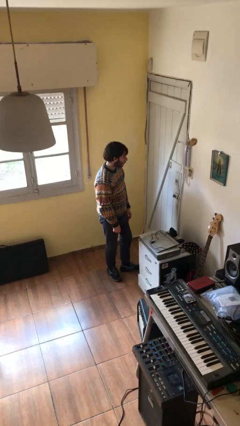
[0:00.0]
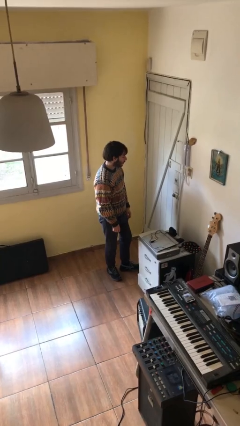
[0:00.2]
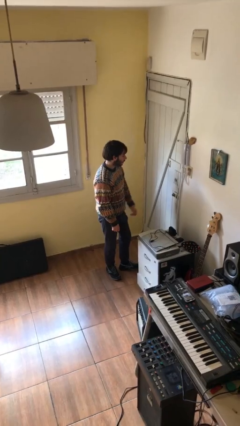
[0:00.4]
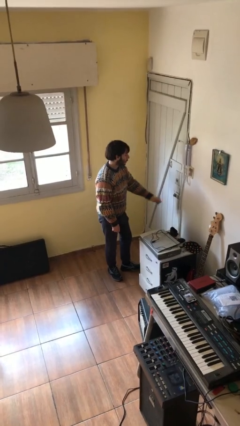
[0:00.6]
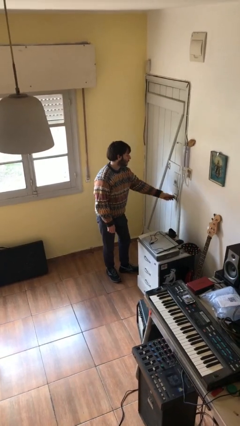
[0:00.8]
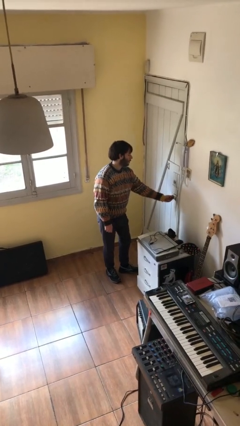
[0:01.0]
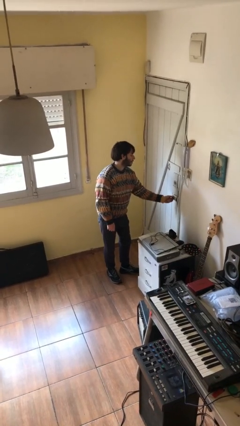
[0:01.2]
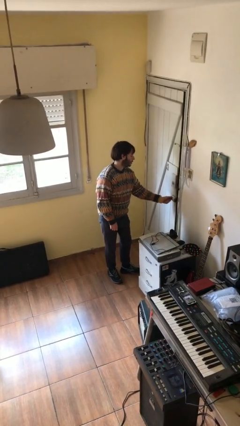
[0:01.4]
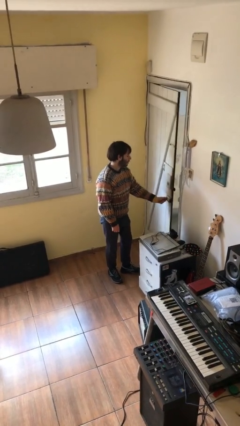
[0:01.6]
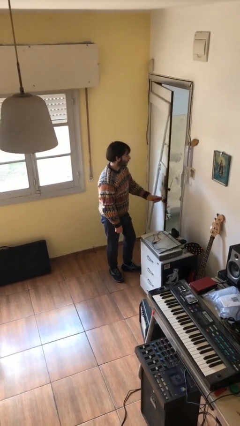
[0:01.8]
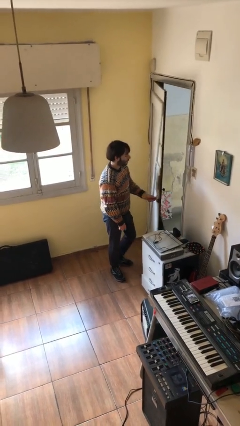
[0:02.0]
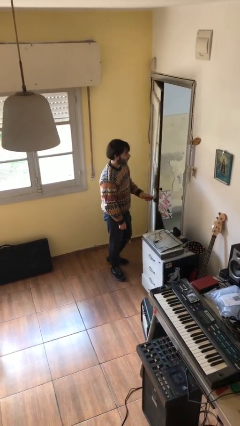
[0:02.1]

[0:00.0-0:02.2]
person opens facility door

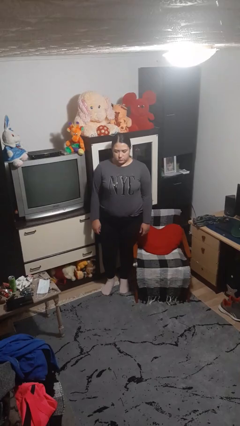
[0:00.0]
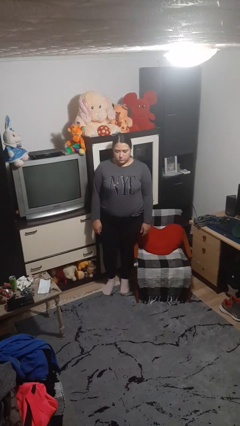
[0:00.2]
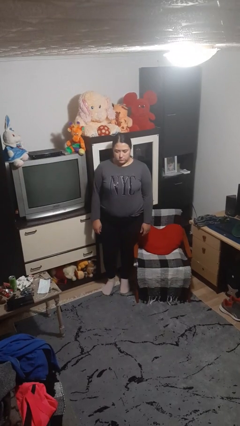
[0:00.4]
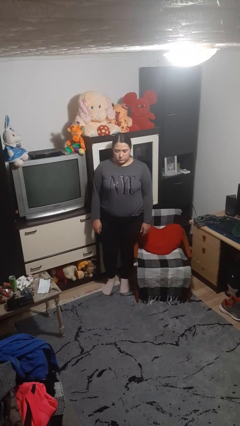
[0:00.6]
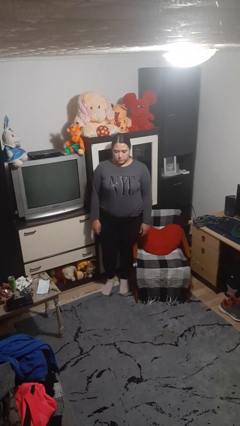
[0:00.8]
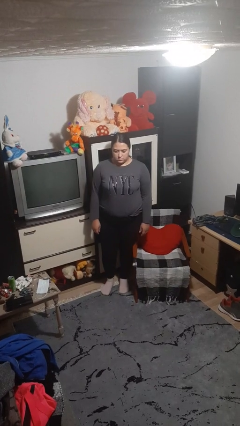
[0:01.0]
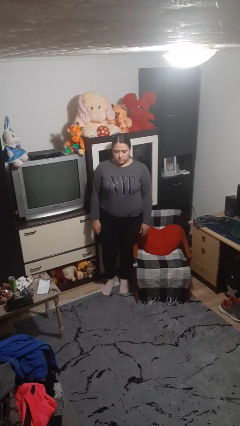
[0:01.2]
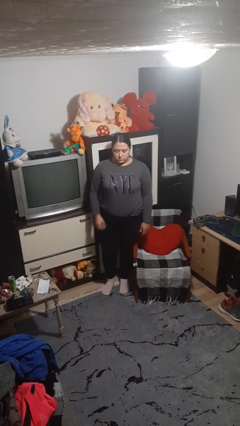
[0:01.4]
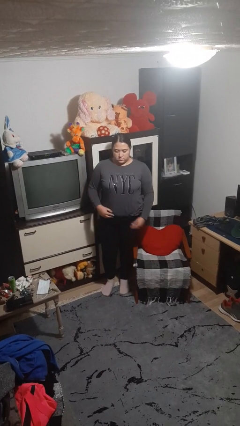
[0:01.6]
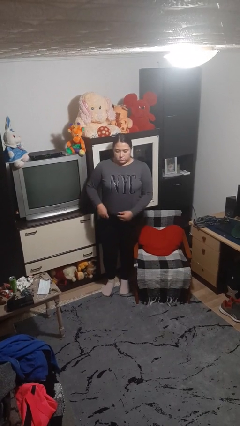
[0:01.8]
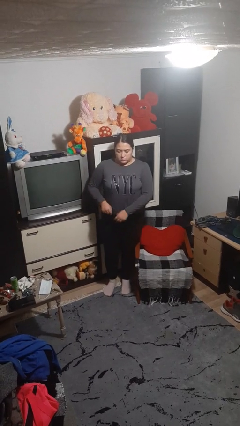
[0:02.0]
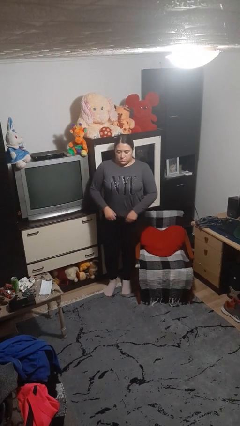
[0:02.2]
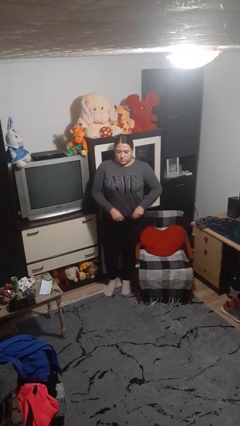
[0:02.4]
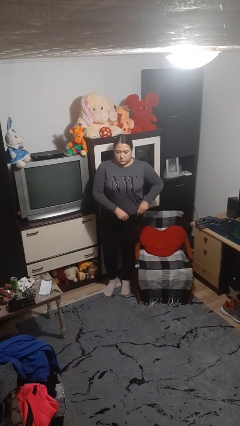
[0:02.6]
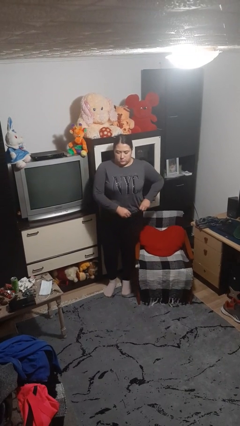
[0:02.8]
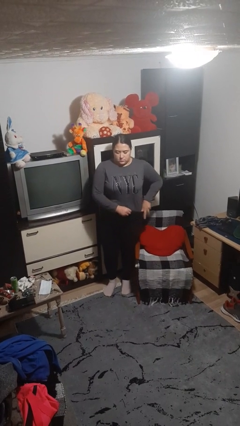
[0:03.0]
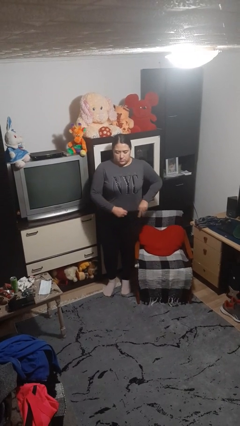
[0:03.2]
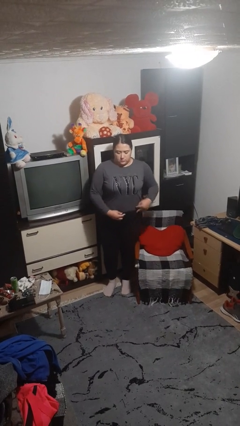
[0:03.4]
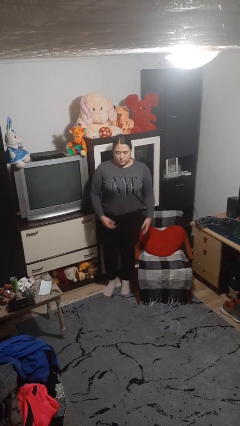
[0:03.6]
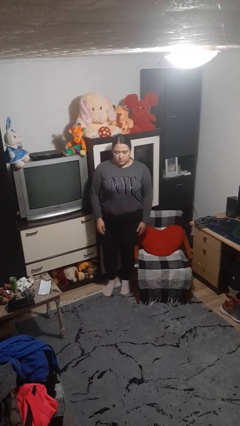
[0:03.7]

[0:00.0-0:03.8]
person hikes up pants

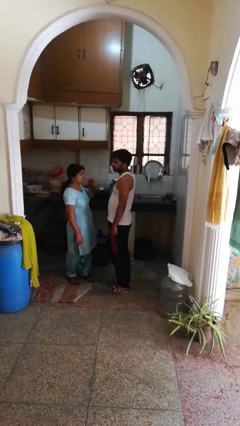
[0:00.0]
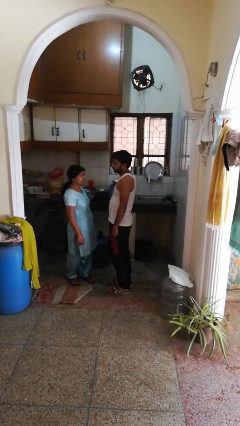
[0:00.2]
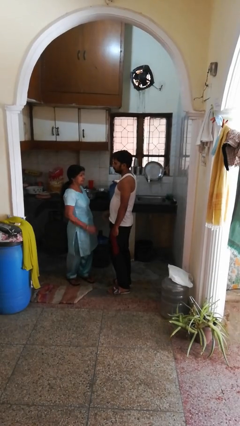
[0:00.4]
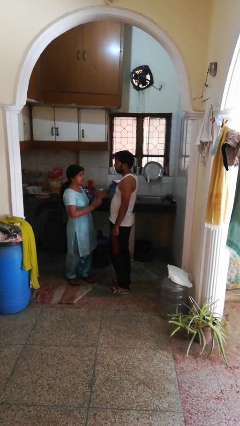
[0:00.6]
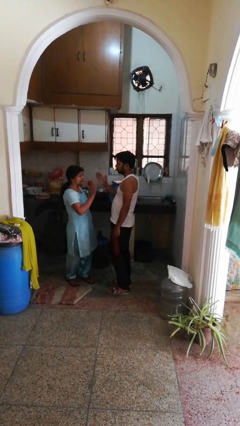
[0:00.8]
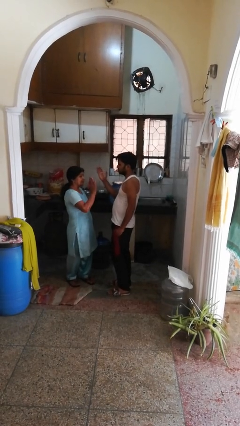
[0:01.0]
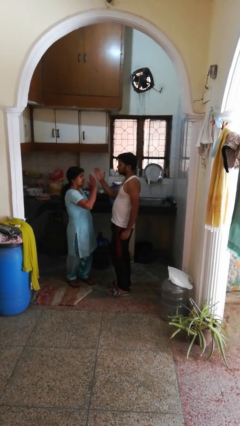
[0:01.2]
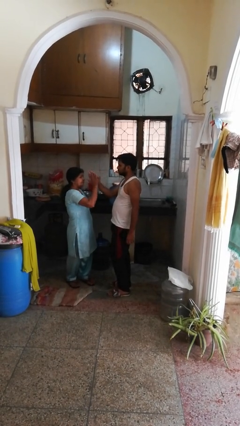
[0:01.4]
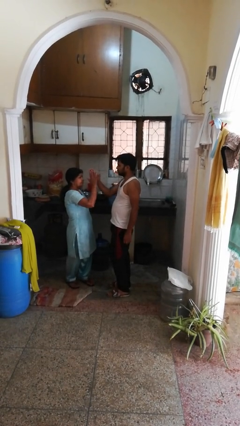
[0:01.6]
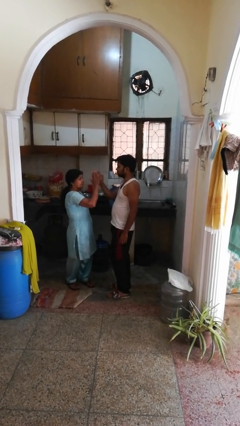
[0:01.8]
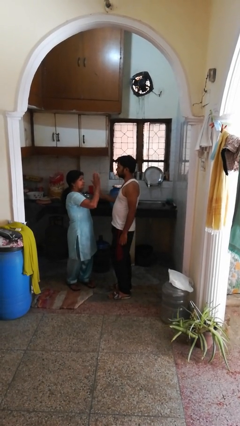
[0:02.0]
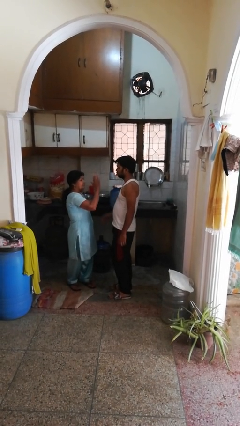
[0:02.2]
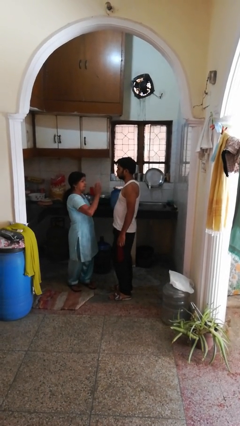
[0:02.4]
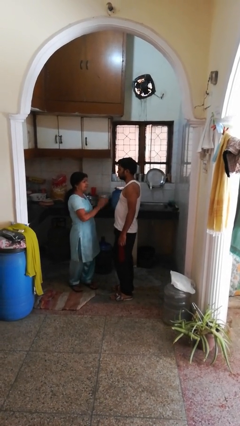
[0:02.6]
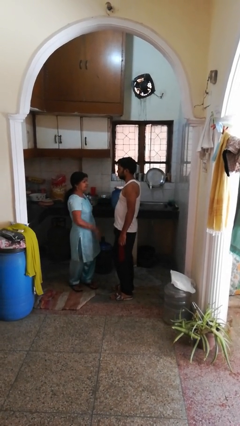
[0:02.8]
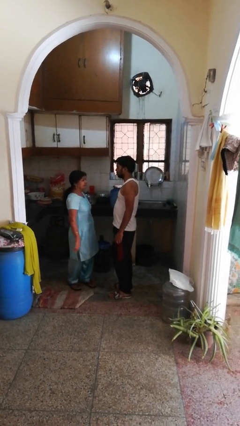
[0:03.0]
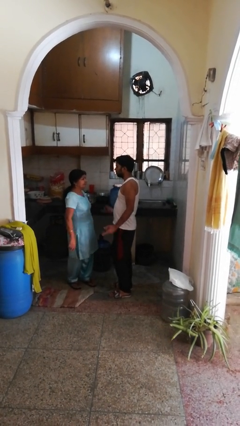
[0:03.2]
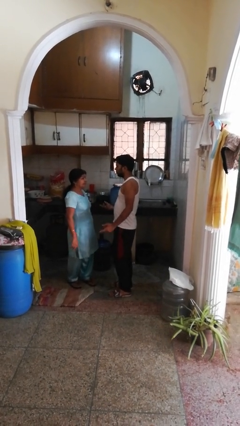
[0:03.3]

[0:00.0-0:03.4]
person highfives hand

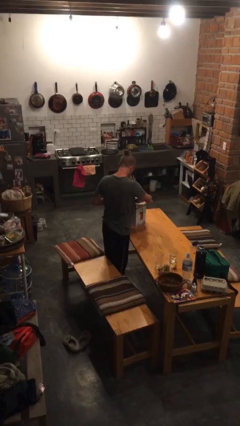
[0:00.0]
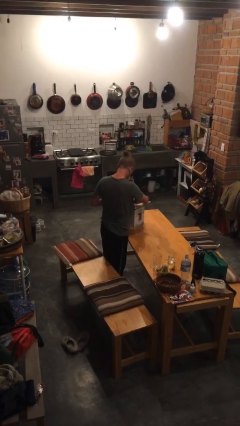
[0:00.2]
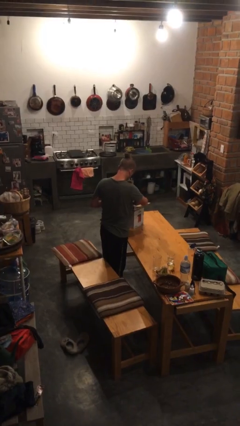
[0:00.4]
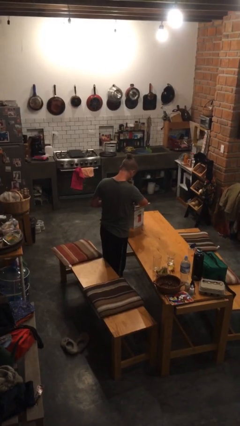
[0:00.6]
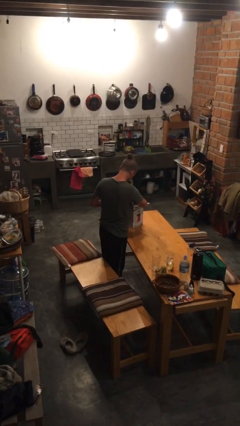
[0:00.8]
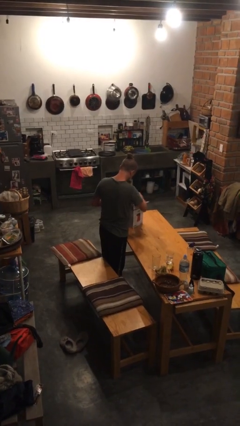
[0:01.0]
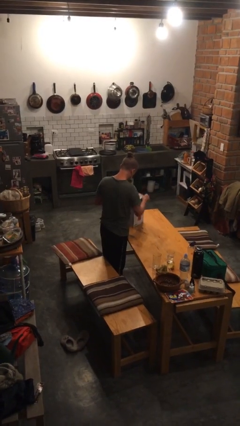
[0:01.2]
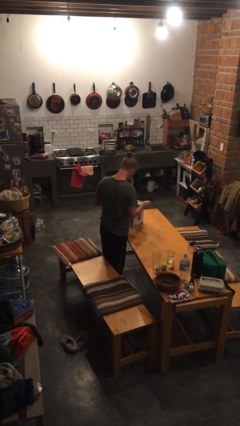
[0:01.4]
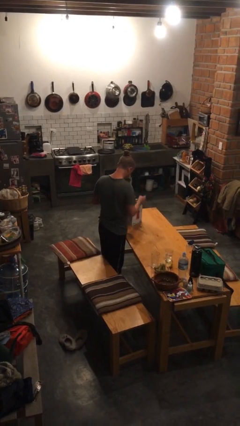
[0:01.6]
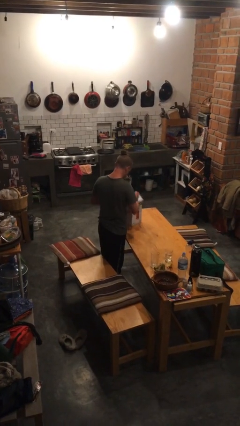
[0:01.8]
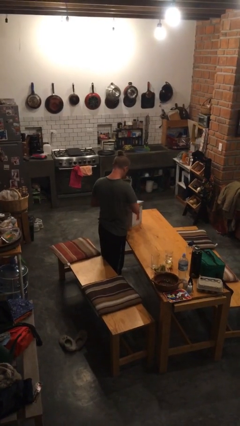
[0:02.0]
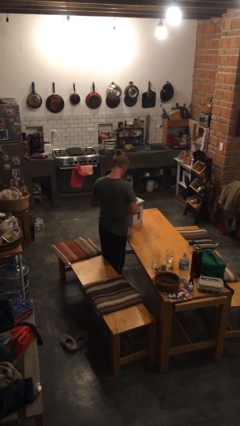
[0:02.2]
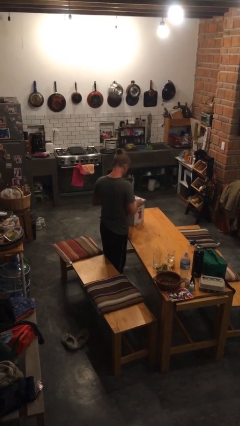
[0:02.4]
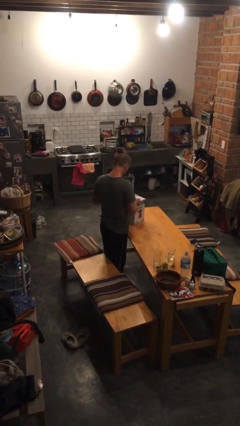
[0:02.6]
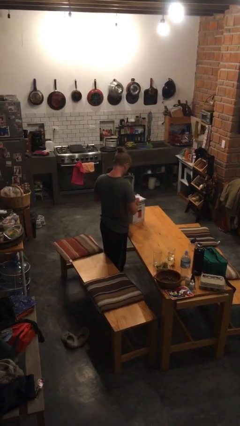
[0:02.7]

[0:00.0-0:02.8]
person closes box

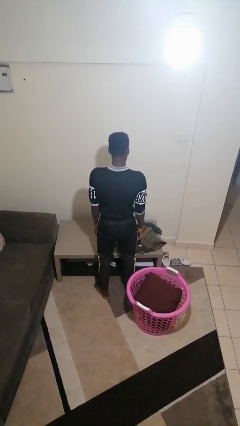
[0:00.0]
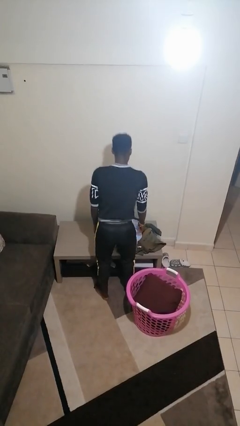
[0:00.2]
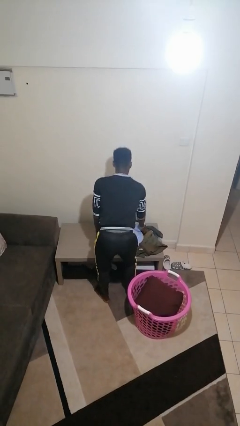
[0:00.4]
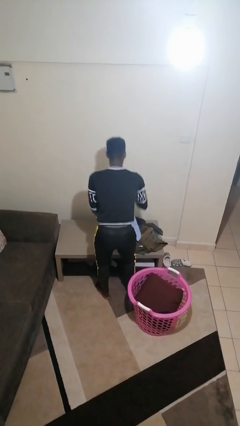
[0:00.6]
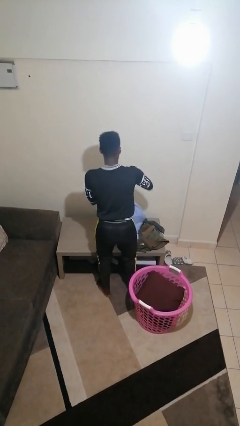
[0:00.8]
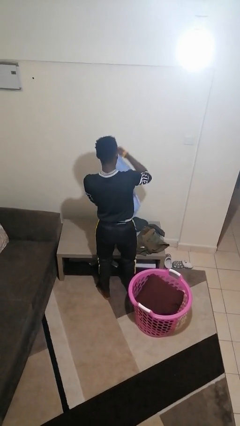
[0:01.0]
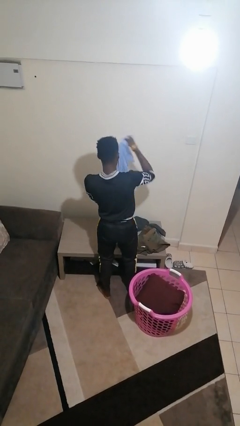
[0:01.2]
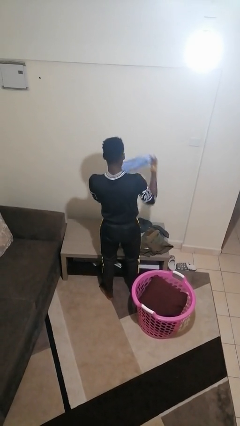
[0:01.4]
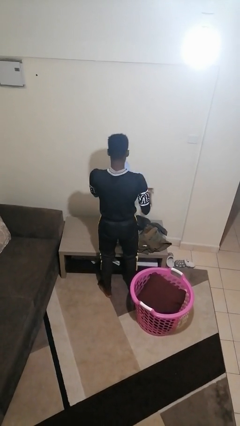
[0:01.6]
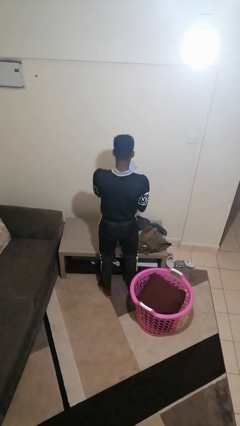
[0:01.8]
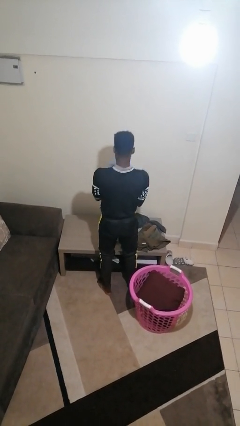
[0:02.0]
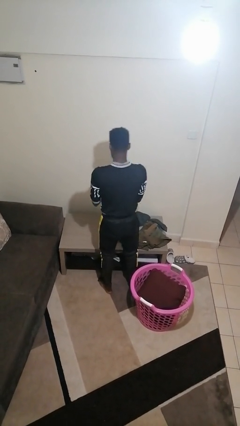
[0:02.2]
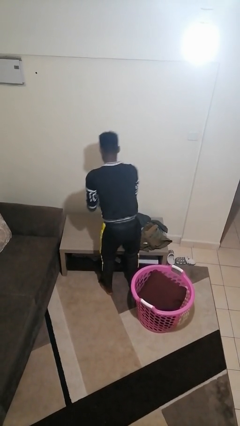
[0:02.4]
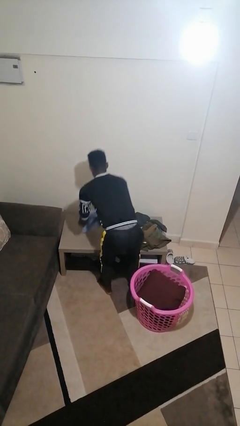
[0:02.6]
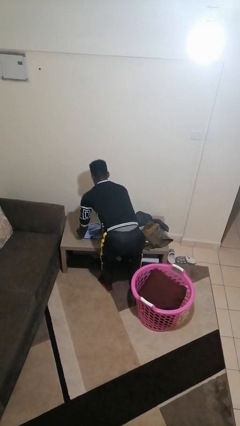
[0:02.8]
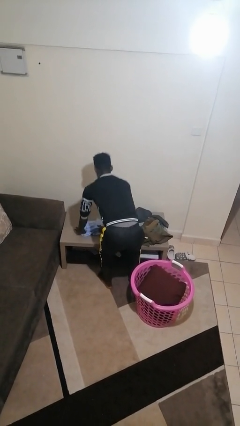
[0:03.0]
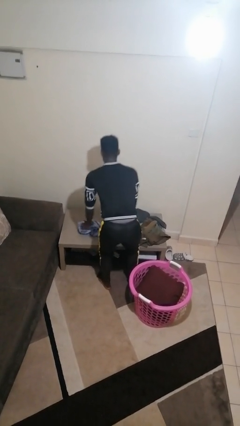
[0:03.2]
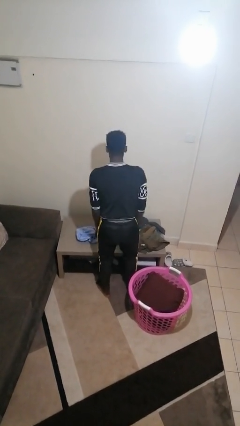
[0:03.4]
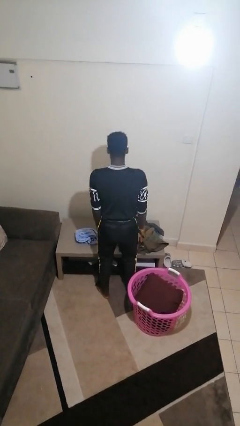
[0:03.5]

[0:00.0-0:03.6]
person folds shirt

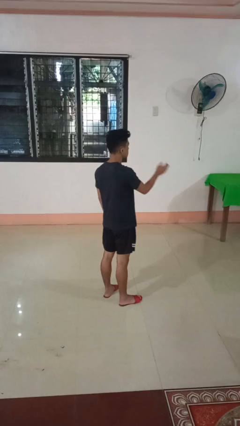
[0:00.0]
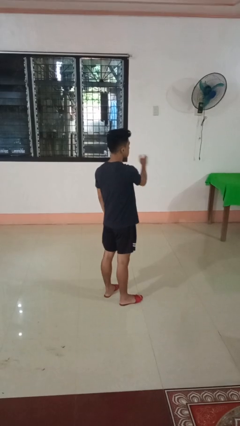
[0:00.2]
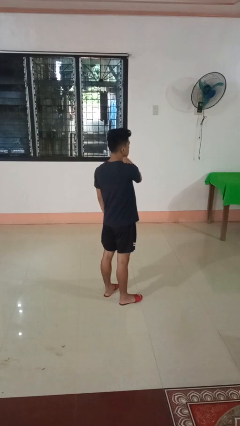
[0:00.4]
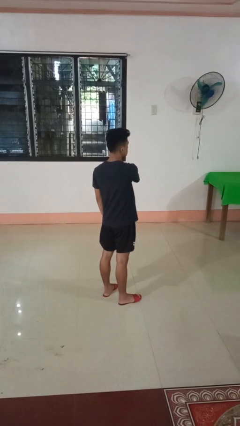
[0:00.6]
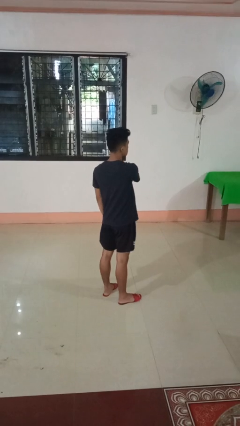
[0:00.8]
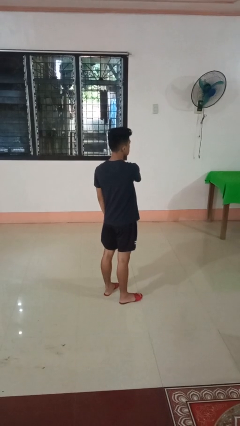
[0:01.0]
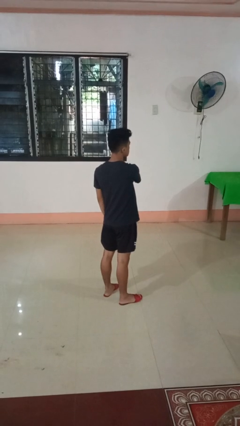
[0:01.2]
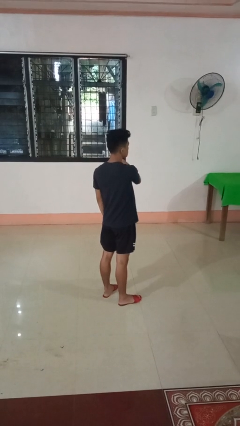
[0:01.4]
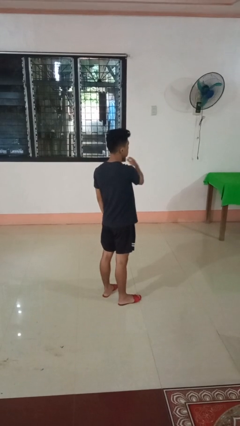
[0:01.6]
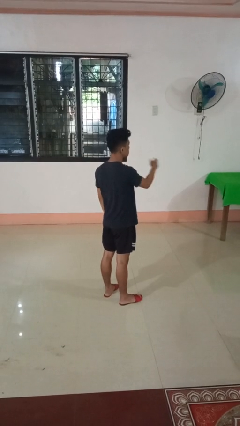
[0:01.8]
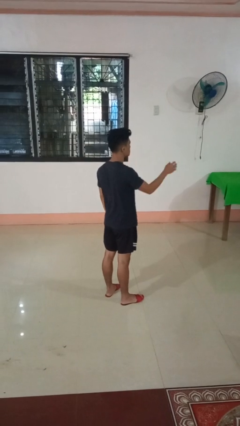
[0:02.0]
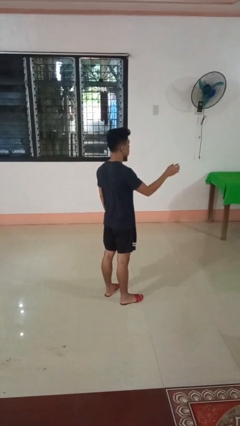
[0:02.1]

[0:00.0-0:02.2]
person gestures swipe left
